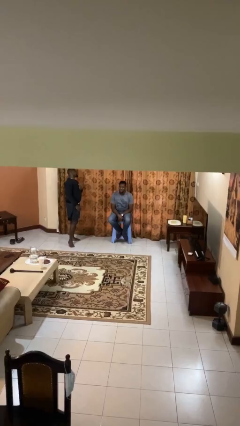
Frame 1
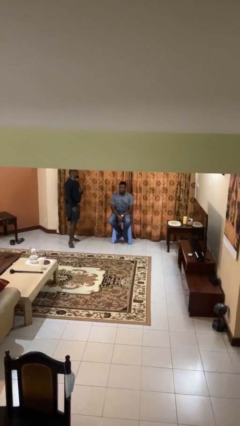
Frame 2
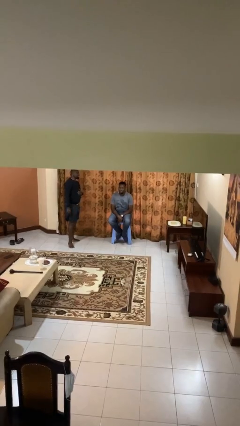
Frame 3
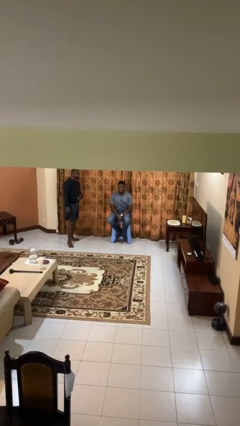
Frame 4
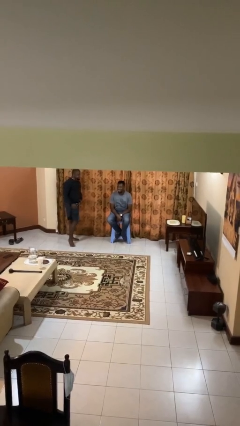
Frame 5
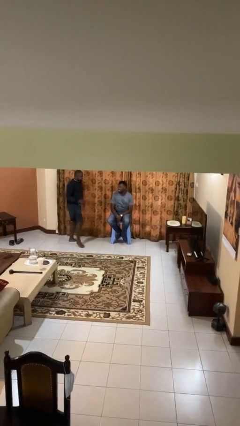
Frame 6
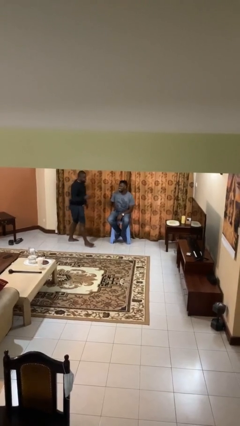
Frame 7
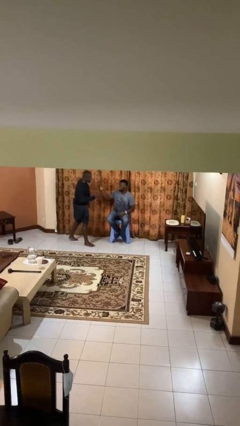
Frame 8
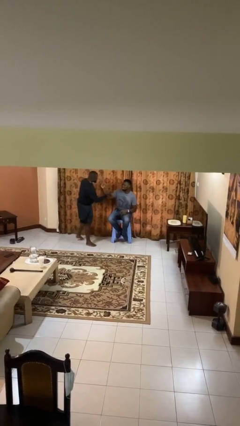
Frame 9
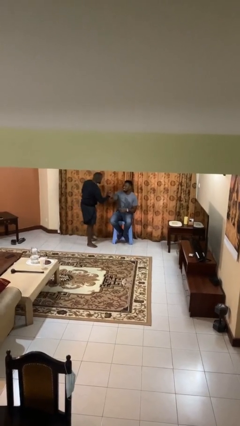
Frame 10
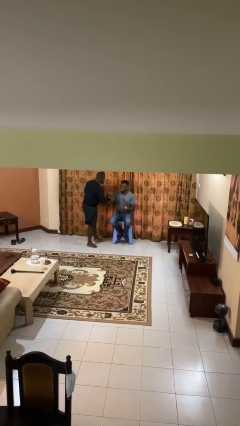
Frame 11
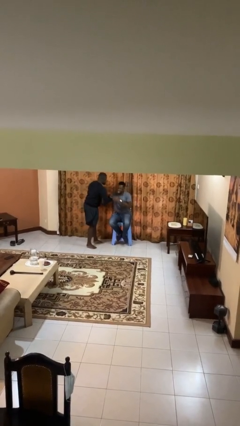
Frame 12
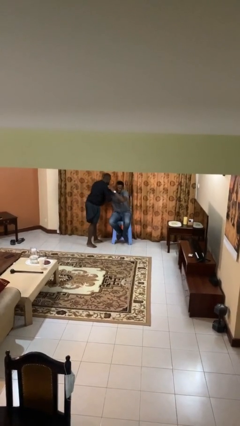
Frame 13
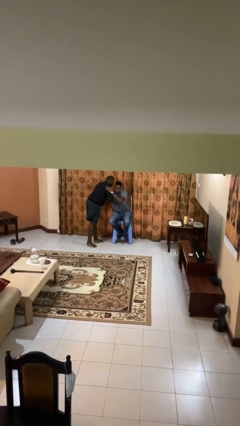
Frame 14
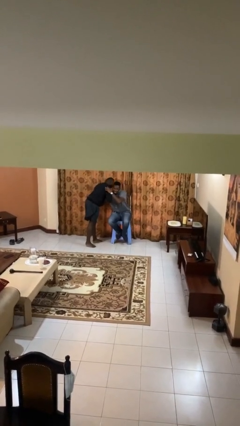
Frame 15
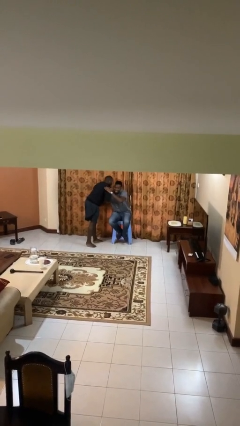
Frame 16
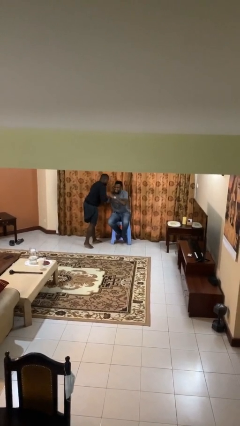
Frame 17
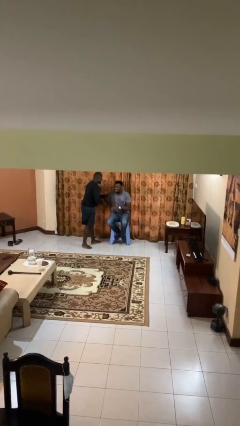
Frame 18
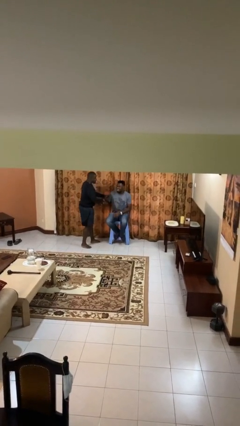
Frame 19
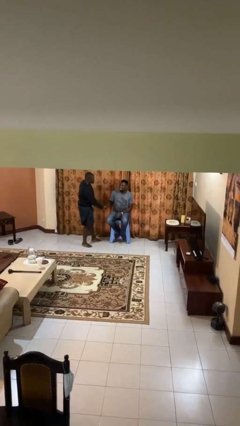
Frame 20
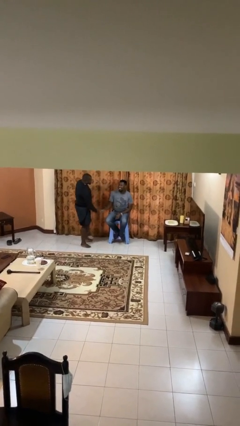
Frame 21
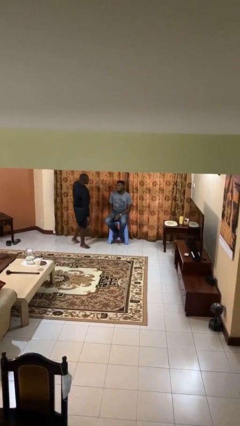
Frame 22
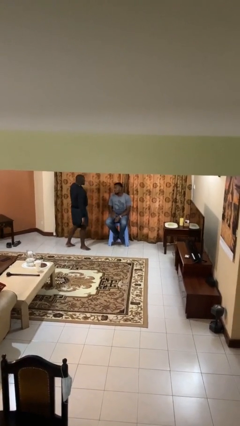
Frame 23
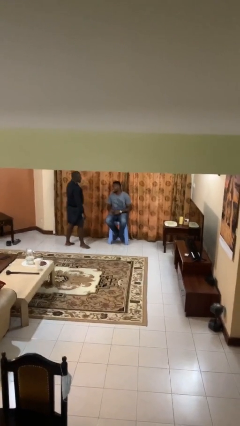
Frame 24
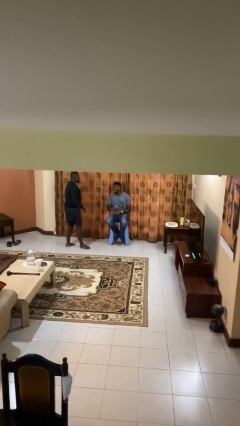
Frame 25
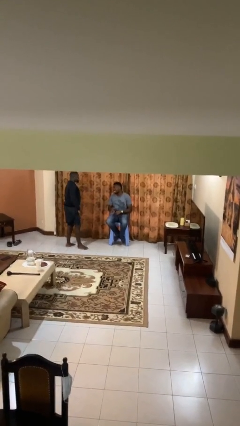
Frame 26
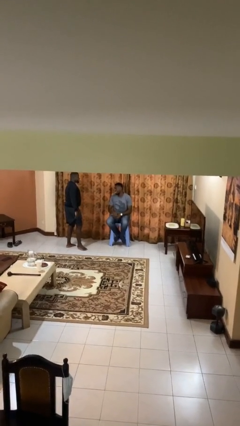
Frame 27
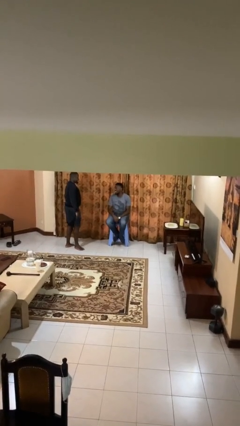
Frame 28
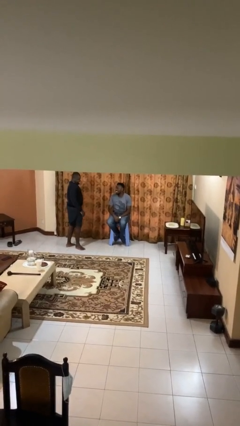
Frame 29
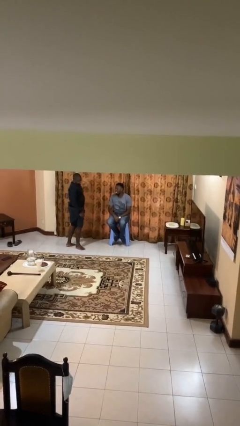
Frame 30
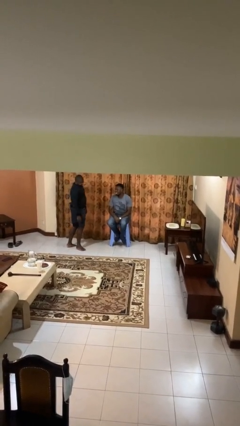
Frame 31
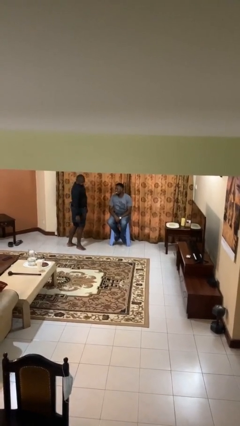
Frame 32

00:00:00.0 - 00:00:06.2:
person embraces person

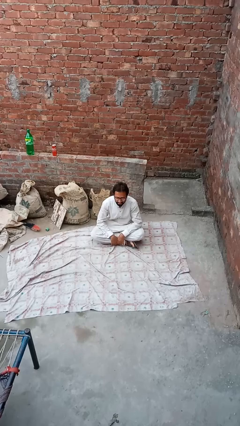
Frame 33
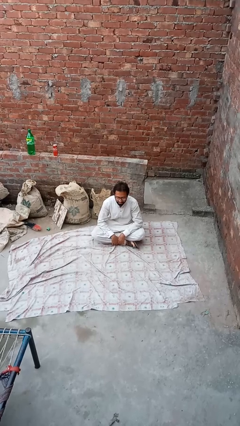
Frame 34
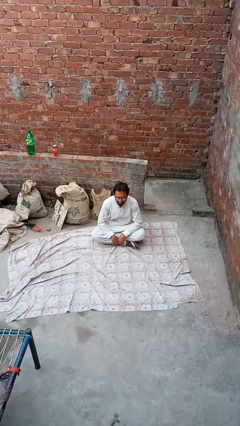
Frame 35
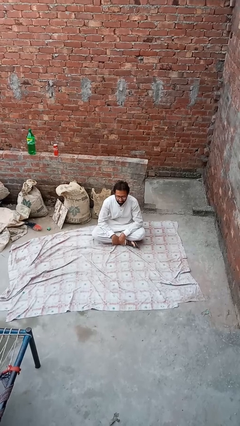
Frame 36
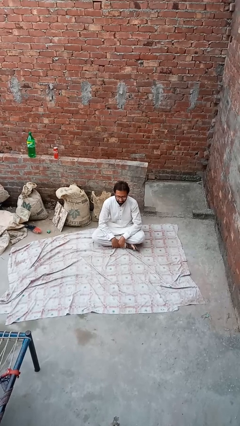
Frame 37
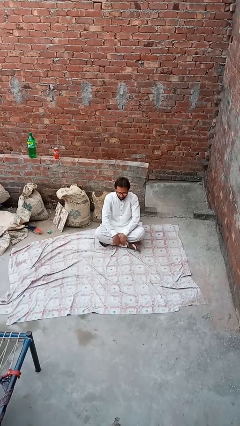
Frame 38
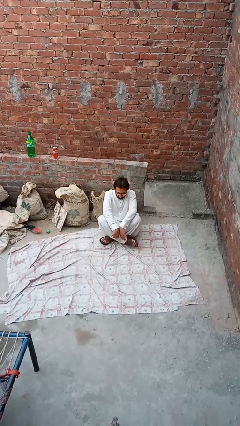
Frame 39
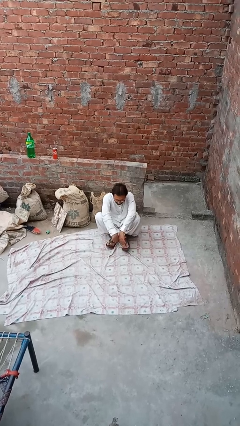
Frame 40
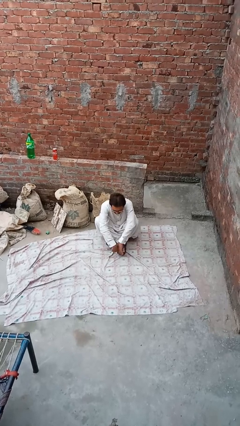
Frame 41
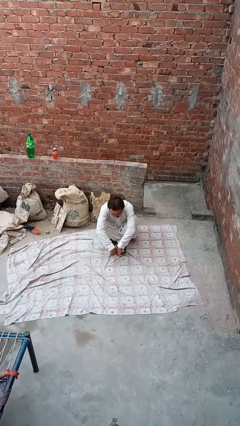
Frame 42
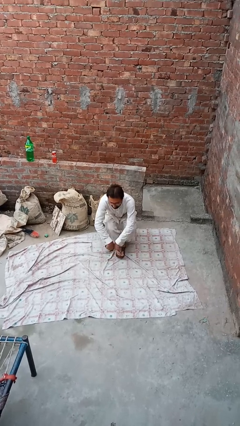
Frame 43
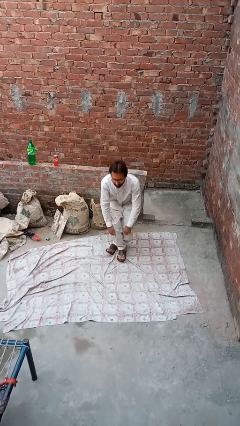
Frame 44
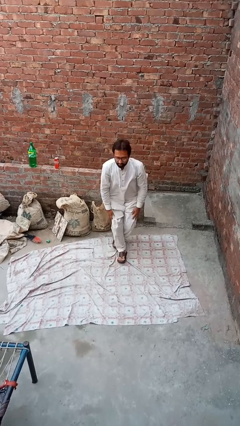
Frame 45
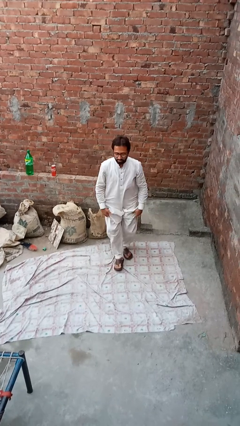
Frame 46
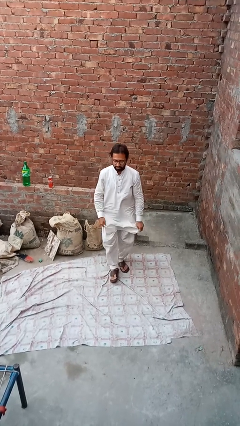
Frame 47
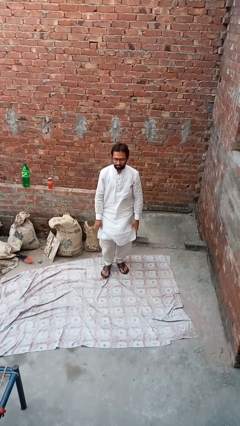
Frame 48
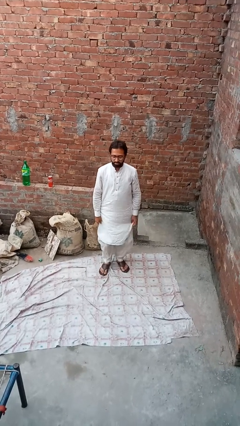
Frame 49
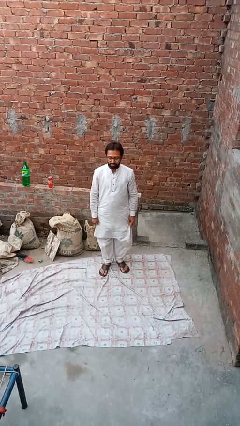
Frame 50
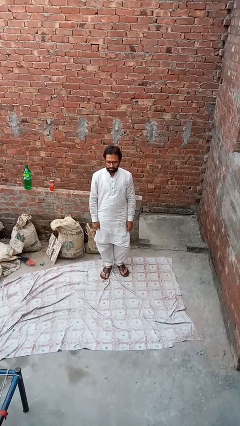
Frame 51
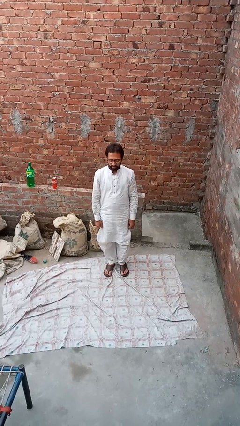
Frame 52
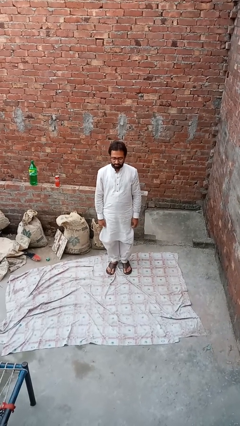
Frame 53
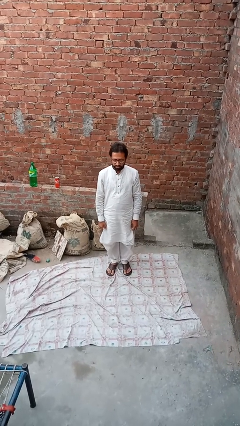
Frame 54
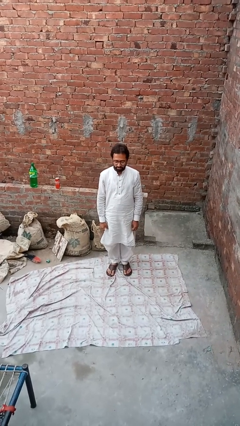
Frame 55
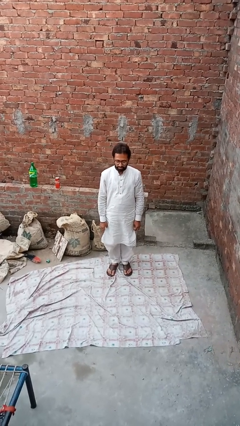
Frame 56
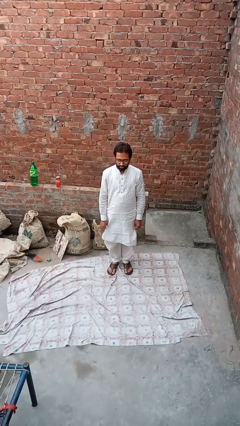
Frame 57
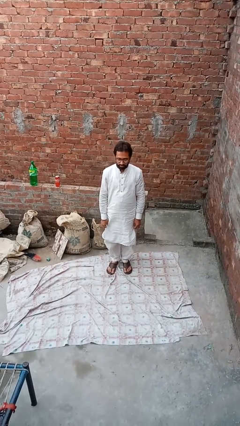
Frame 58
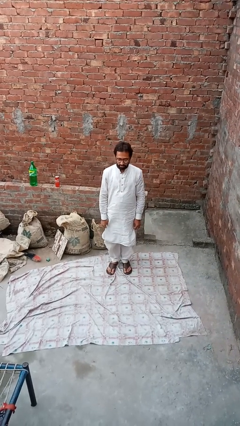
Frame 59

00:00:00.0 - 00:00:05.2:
person stands up from floor

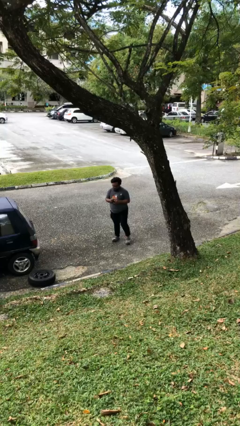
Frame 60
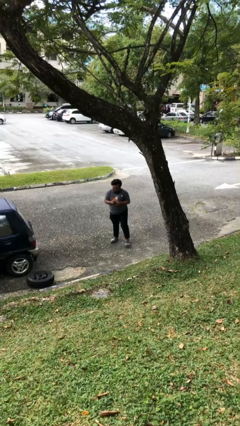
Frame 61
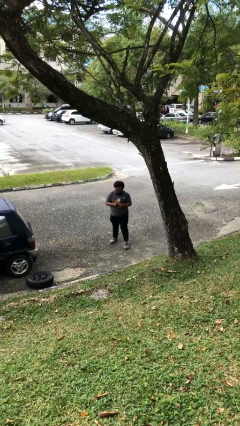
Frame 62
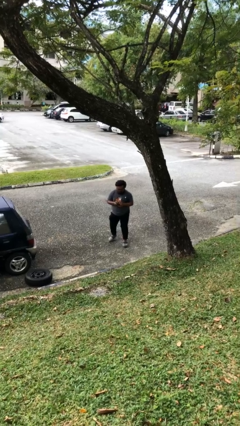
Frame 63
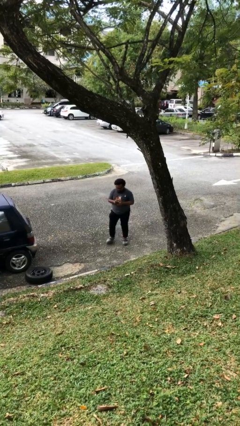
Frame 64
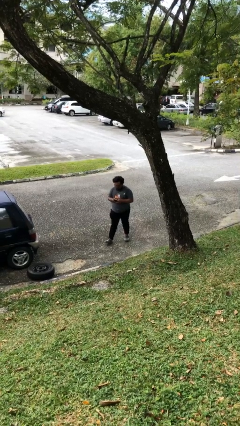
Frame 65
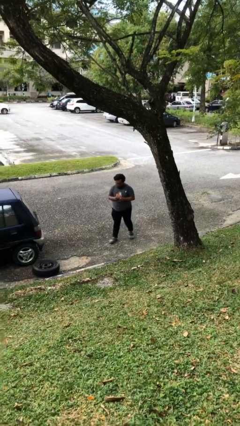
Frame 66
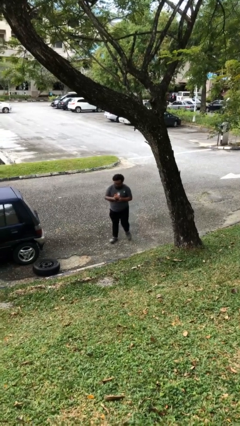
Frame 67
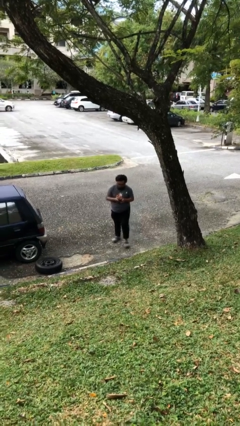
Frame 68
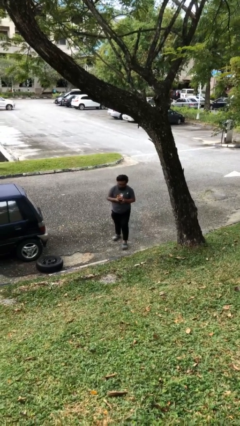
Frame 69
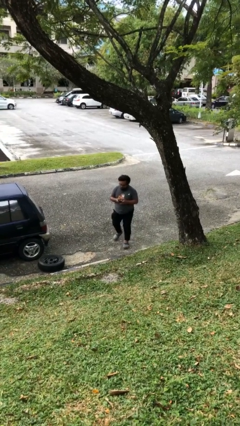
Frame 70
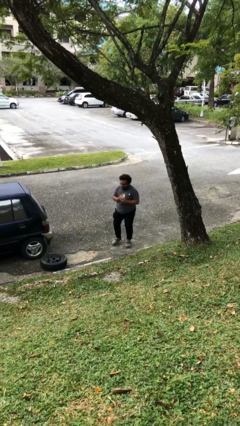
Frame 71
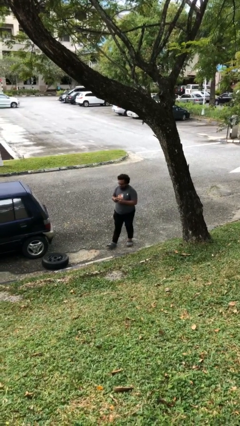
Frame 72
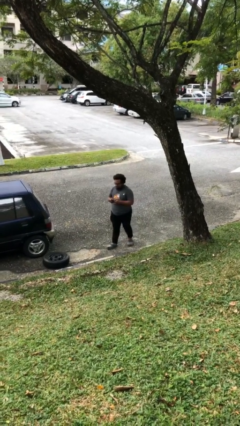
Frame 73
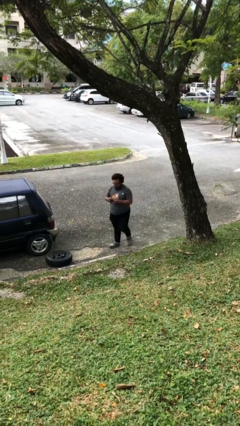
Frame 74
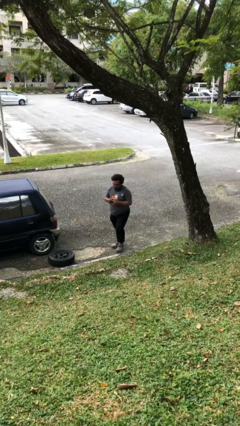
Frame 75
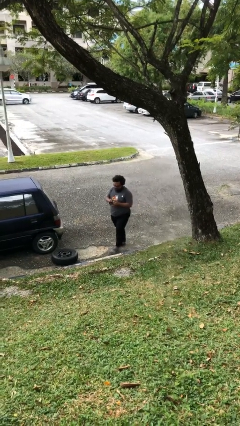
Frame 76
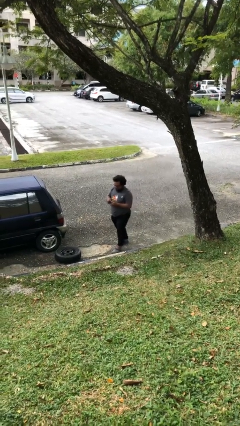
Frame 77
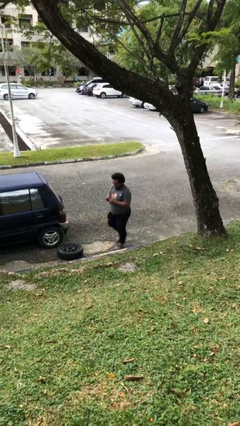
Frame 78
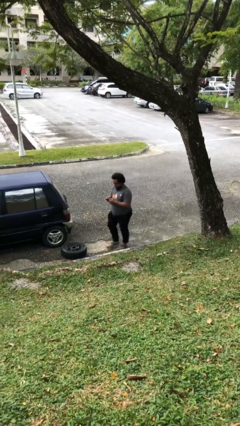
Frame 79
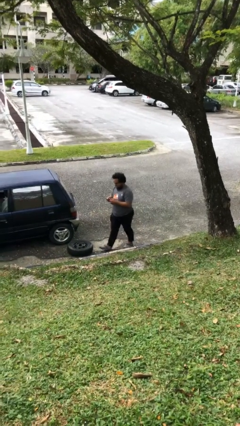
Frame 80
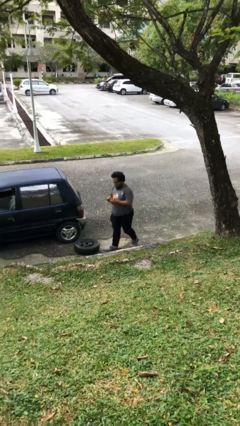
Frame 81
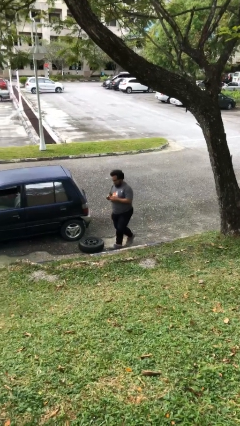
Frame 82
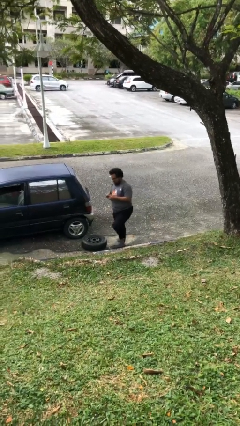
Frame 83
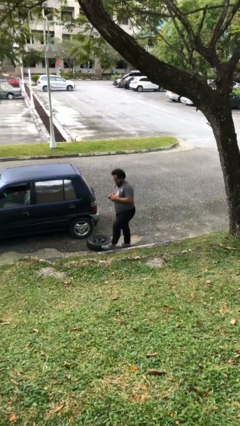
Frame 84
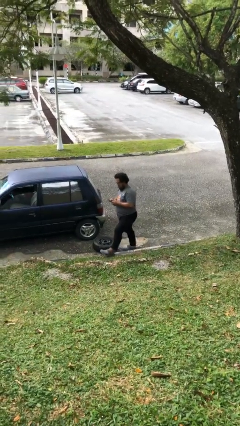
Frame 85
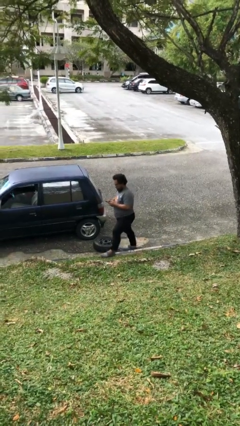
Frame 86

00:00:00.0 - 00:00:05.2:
person texts on phone

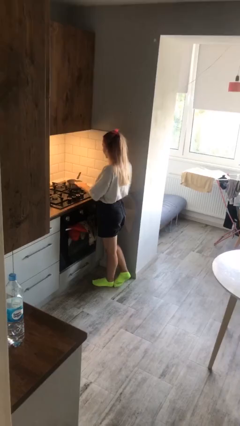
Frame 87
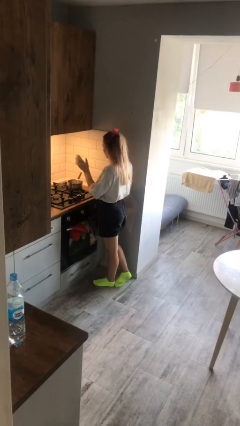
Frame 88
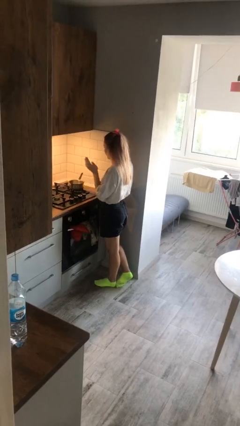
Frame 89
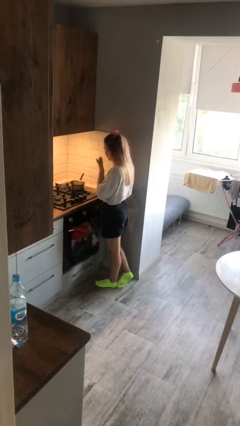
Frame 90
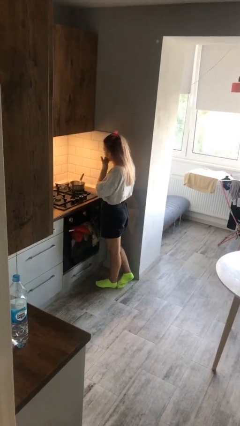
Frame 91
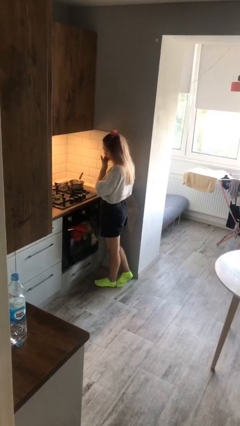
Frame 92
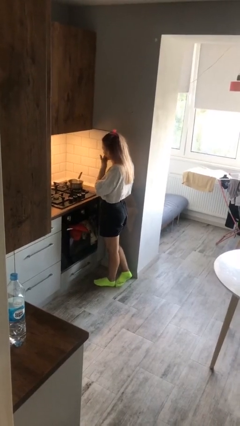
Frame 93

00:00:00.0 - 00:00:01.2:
person burns hand
